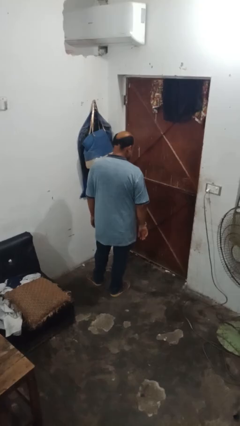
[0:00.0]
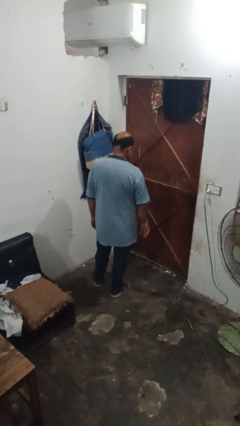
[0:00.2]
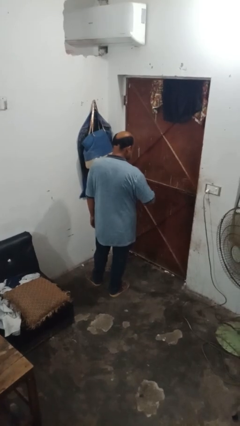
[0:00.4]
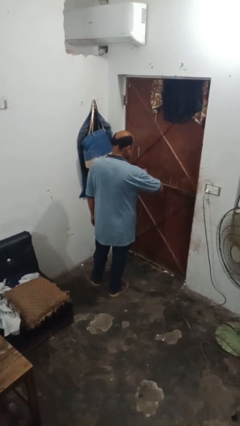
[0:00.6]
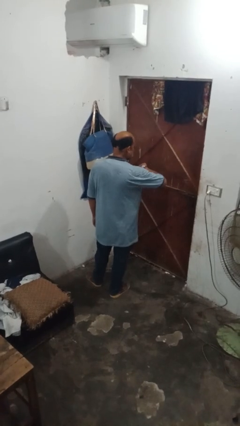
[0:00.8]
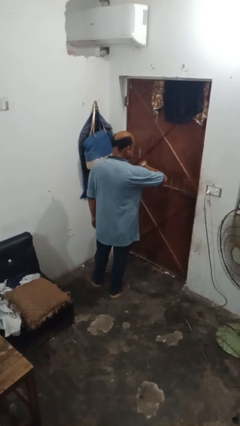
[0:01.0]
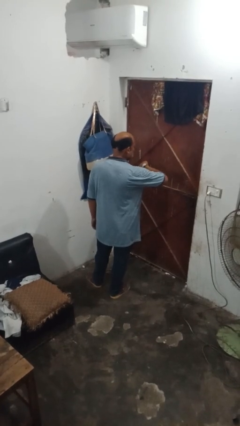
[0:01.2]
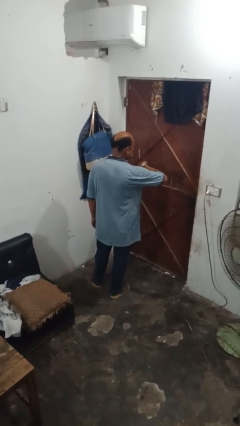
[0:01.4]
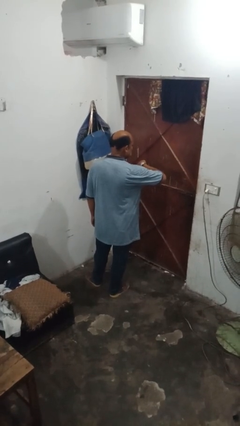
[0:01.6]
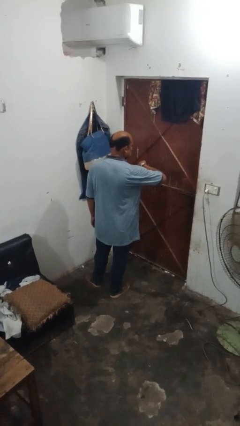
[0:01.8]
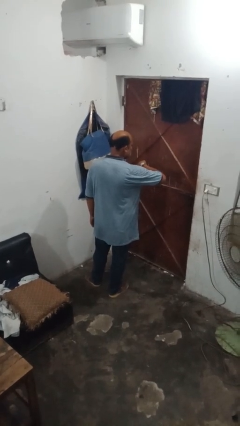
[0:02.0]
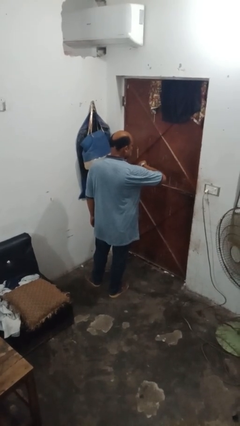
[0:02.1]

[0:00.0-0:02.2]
person looks at wristwatch

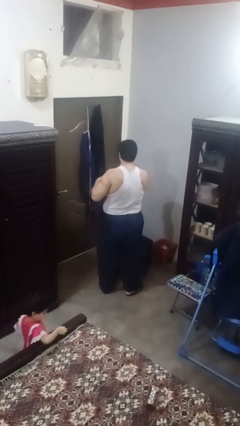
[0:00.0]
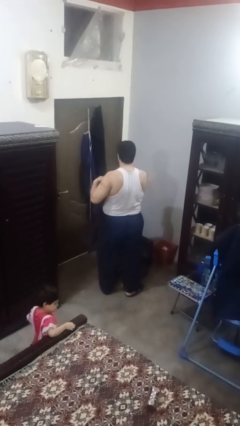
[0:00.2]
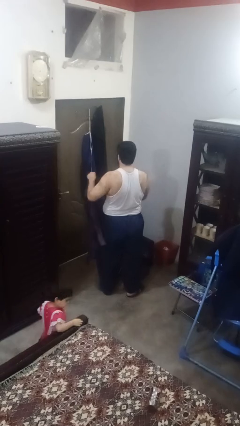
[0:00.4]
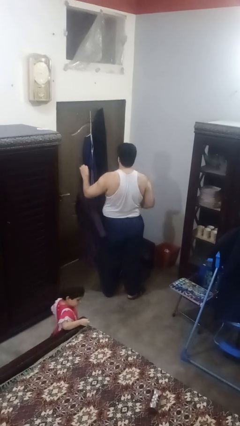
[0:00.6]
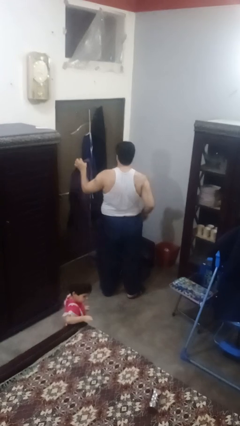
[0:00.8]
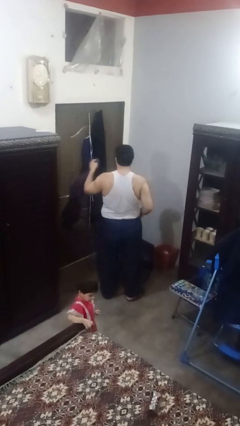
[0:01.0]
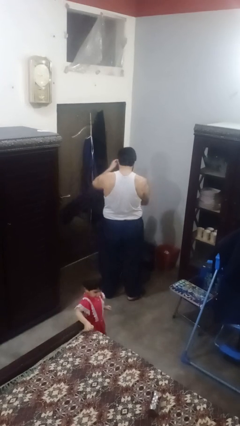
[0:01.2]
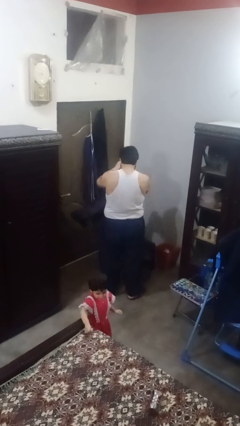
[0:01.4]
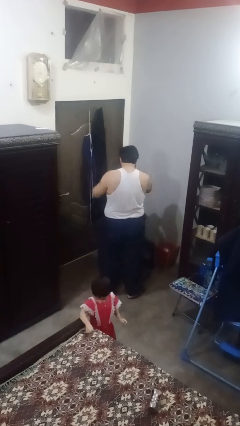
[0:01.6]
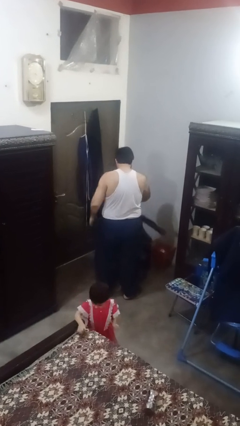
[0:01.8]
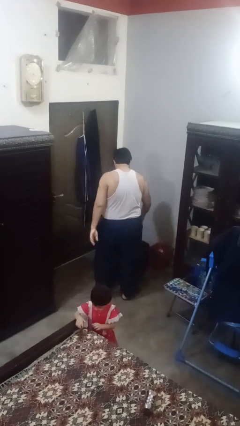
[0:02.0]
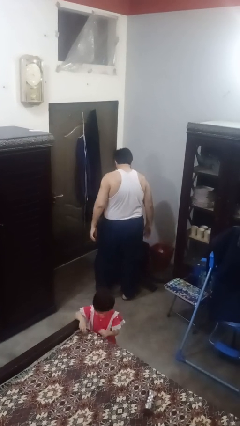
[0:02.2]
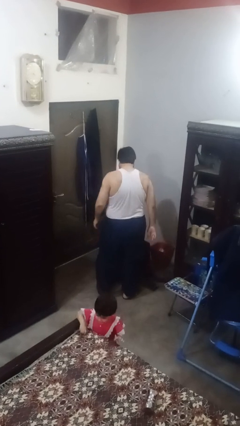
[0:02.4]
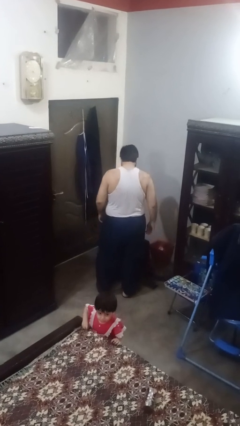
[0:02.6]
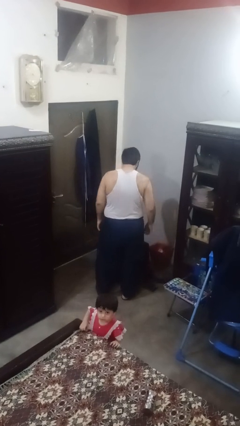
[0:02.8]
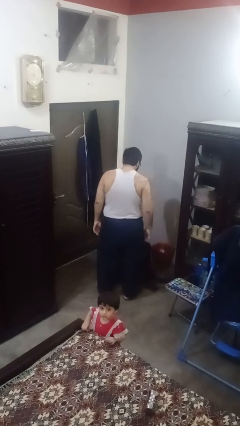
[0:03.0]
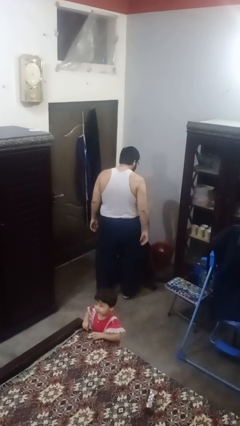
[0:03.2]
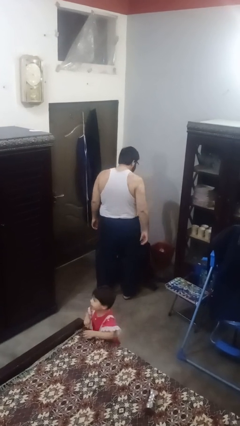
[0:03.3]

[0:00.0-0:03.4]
person loads clothes into suitcase

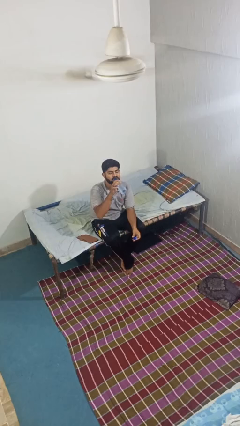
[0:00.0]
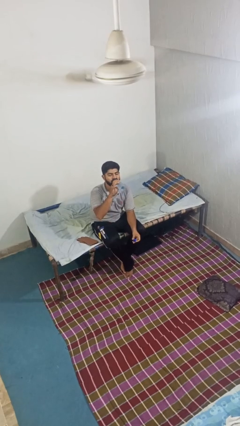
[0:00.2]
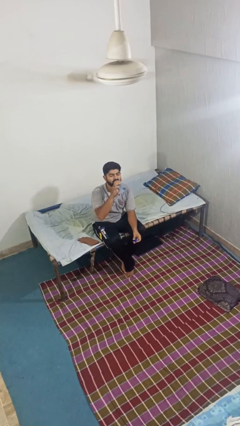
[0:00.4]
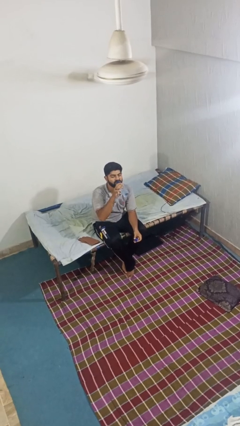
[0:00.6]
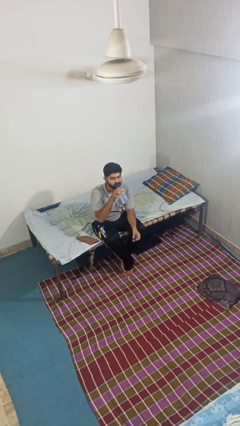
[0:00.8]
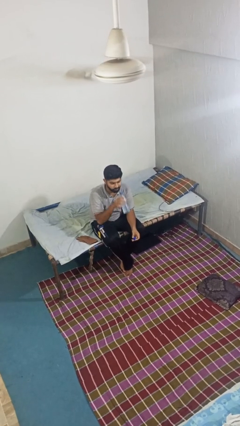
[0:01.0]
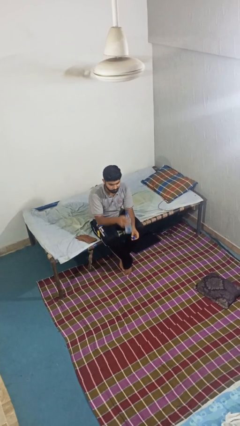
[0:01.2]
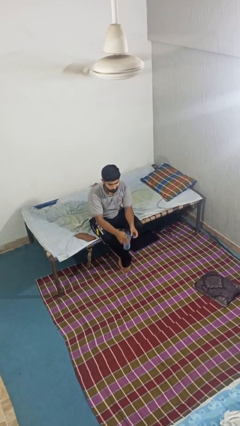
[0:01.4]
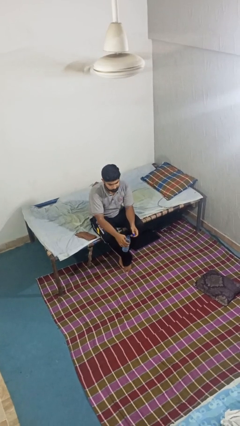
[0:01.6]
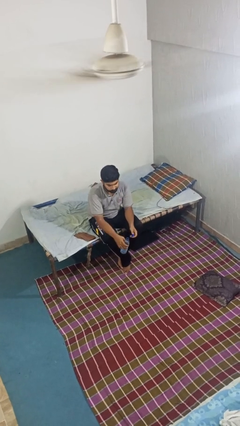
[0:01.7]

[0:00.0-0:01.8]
person drinks from bottle

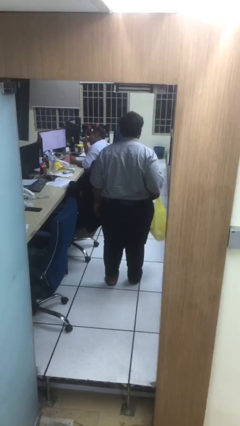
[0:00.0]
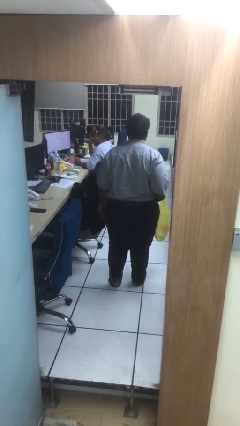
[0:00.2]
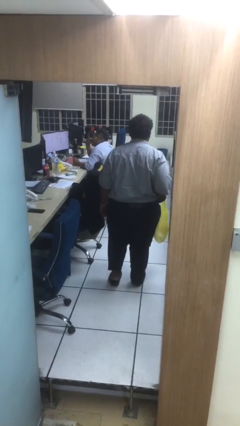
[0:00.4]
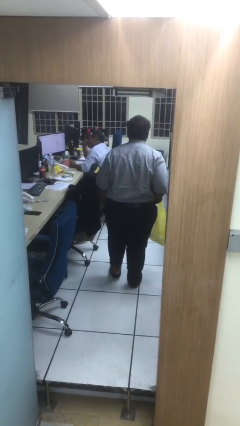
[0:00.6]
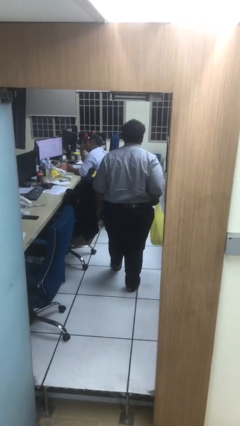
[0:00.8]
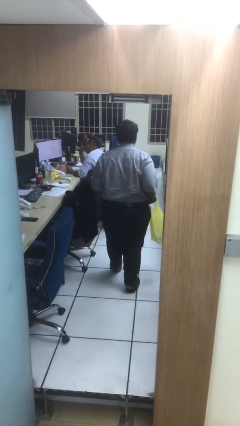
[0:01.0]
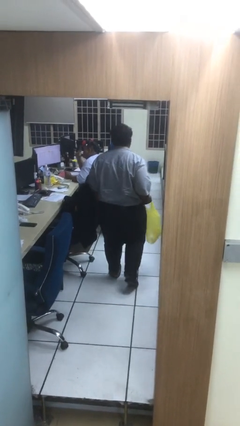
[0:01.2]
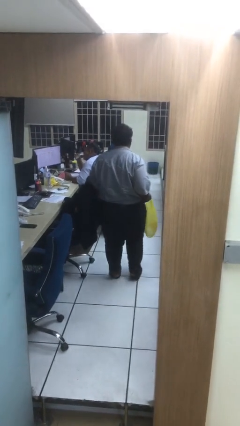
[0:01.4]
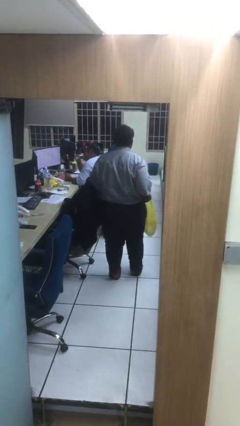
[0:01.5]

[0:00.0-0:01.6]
person carries groceries

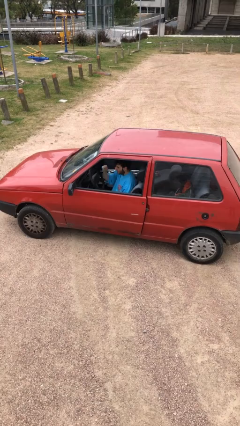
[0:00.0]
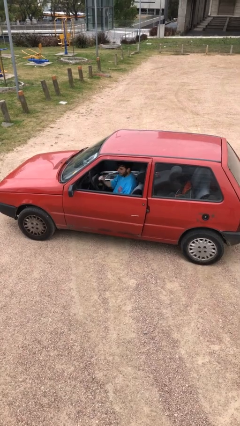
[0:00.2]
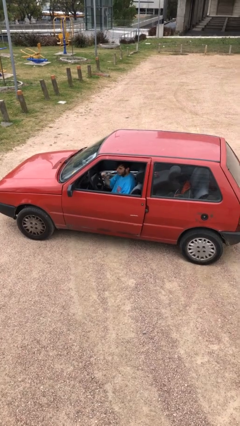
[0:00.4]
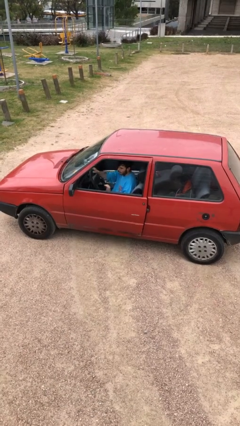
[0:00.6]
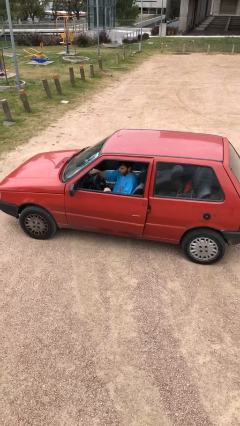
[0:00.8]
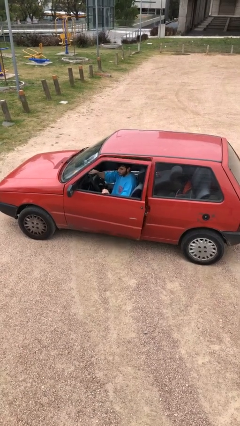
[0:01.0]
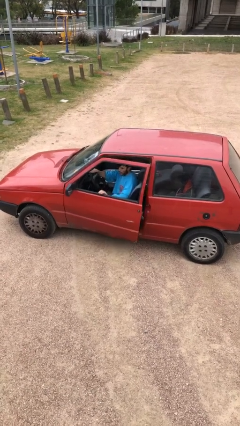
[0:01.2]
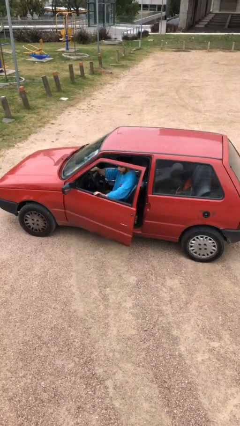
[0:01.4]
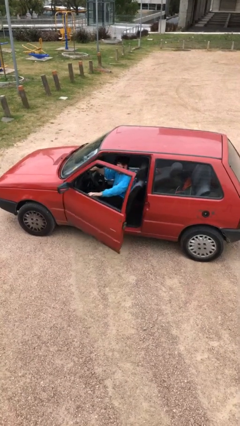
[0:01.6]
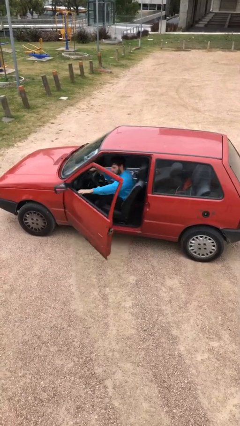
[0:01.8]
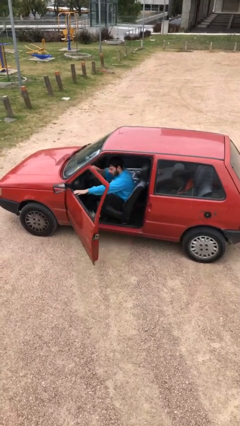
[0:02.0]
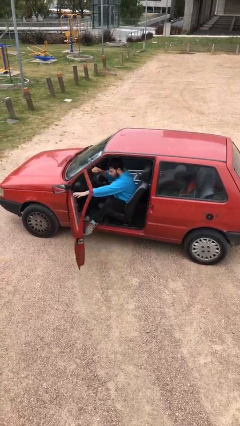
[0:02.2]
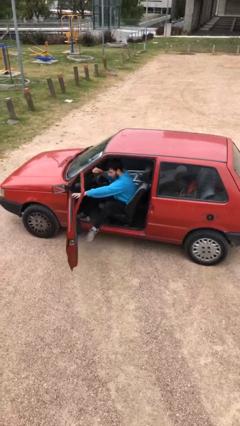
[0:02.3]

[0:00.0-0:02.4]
person opens car door

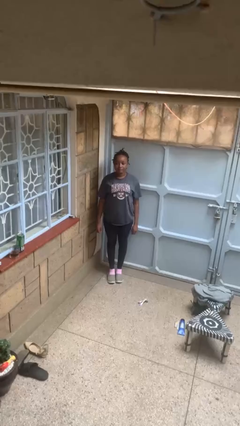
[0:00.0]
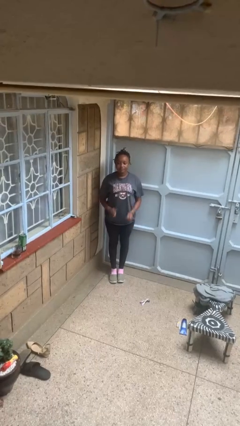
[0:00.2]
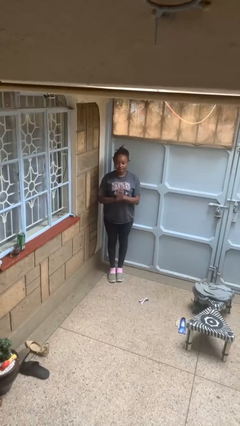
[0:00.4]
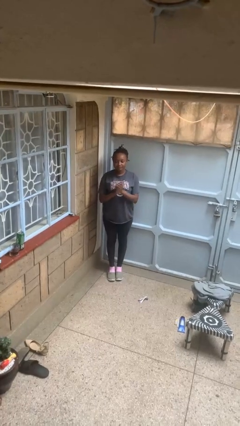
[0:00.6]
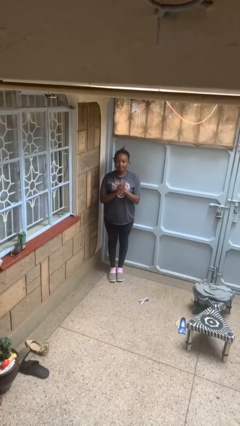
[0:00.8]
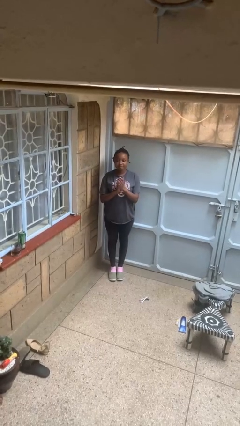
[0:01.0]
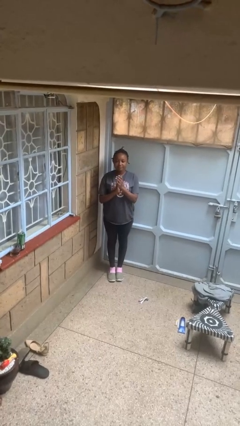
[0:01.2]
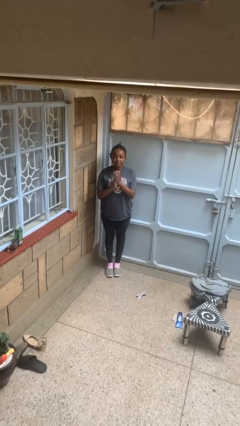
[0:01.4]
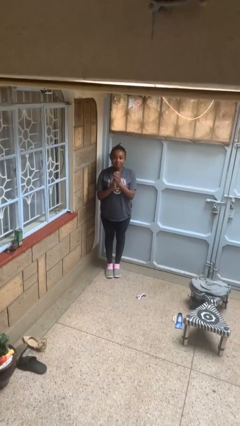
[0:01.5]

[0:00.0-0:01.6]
person claps hands

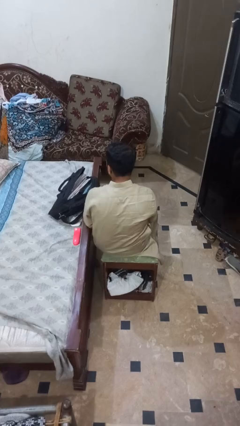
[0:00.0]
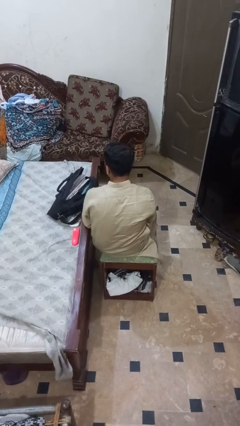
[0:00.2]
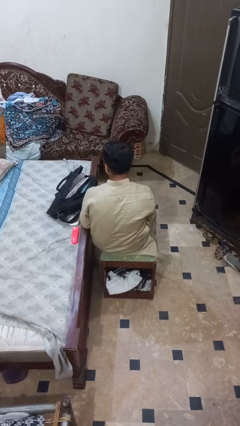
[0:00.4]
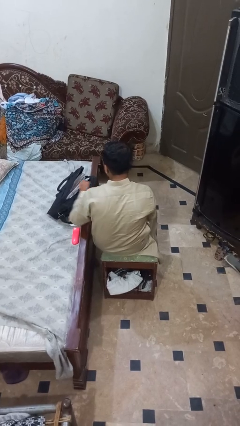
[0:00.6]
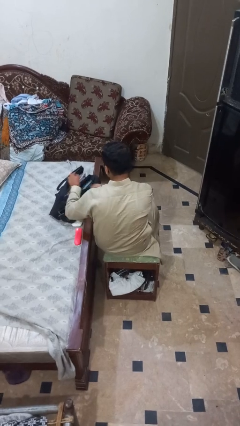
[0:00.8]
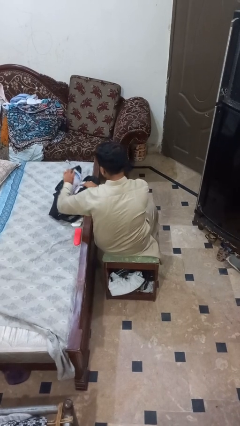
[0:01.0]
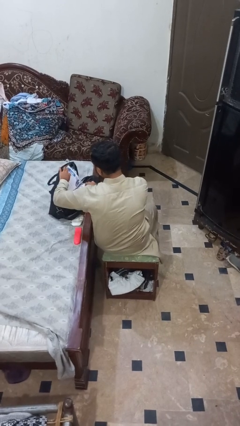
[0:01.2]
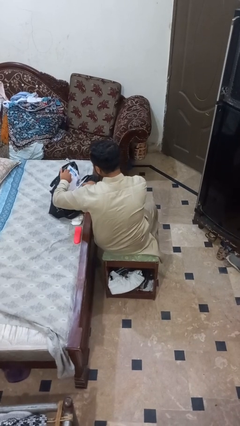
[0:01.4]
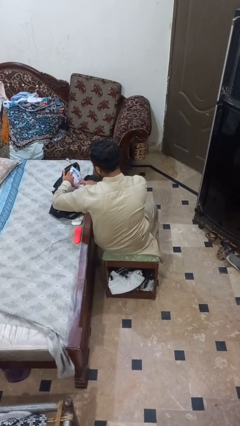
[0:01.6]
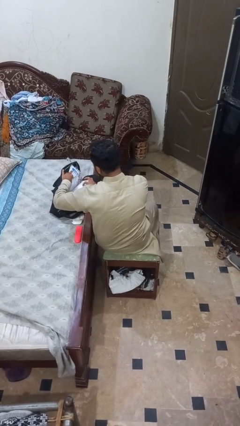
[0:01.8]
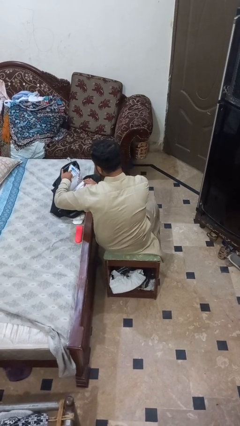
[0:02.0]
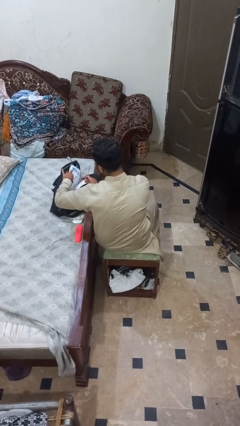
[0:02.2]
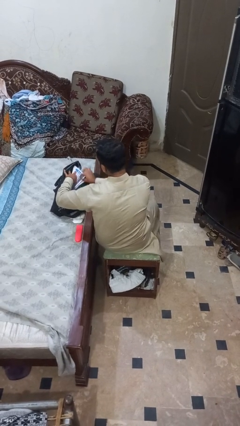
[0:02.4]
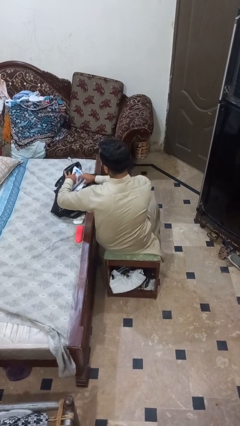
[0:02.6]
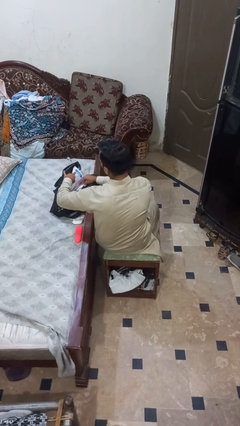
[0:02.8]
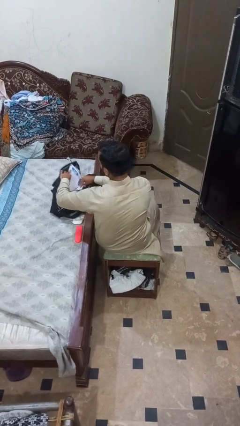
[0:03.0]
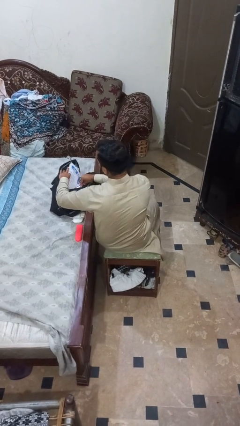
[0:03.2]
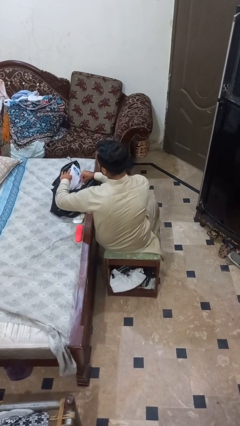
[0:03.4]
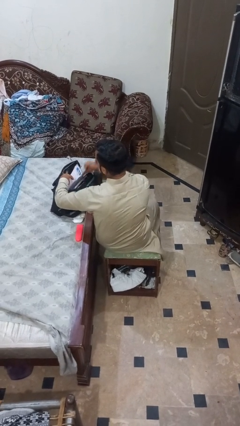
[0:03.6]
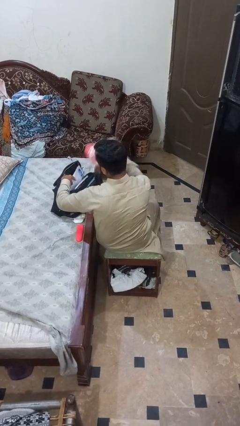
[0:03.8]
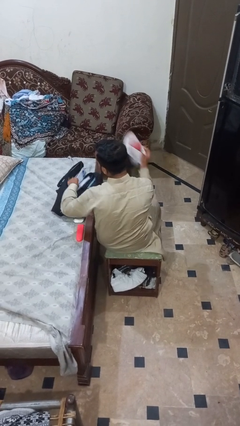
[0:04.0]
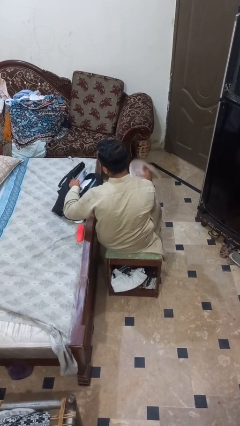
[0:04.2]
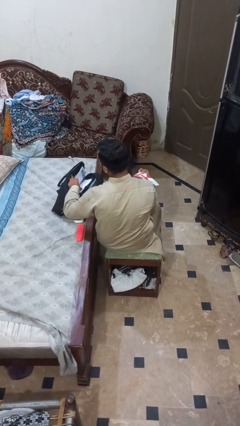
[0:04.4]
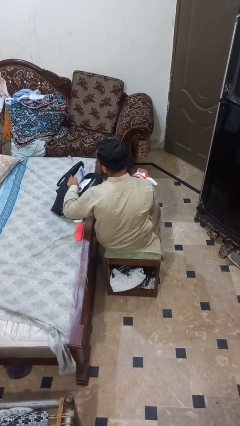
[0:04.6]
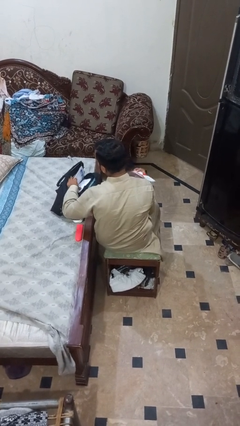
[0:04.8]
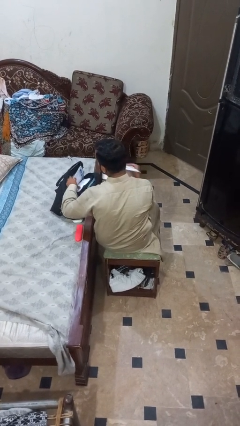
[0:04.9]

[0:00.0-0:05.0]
person searches in bag
